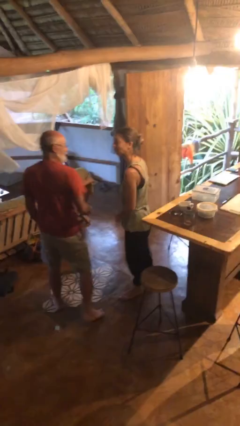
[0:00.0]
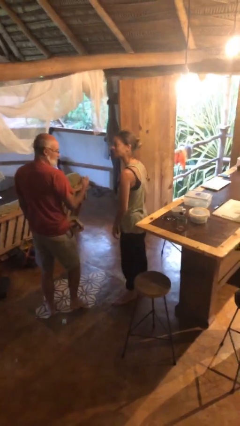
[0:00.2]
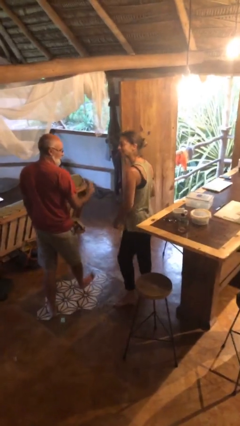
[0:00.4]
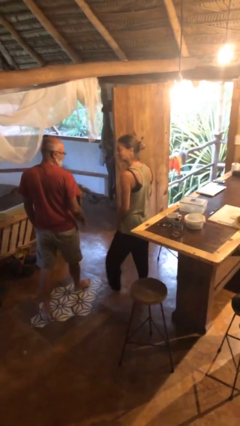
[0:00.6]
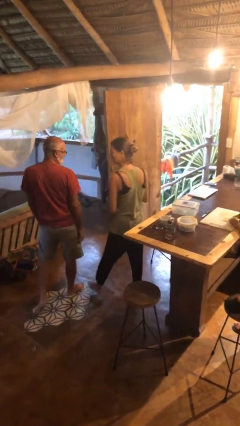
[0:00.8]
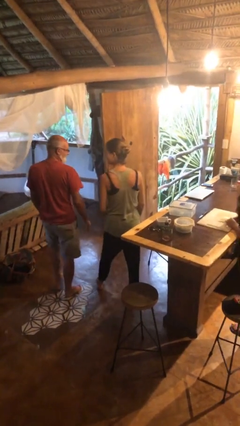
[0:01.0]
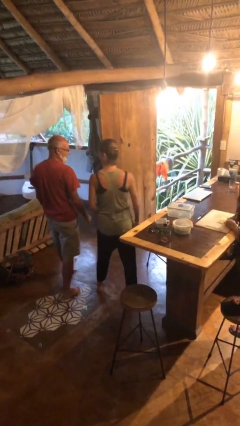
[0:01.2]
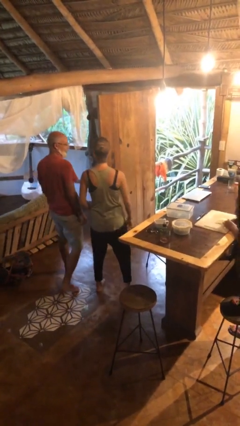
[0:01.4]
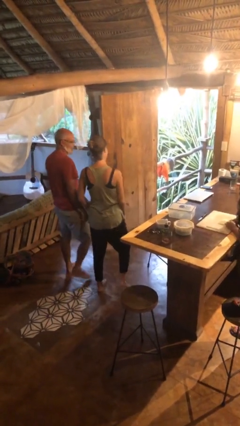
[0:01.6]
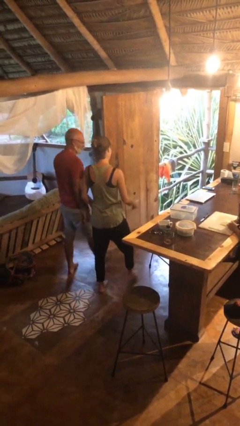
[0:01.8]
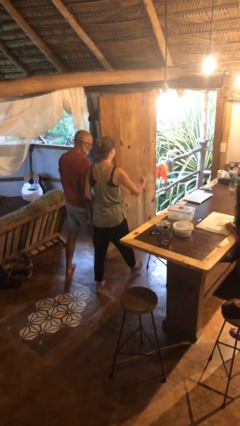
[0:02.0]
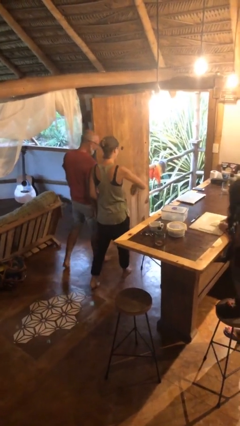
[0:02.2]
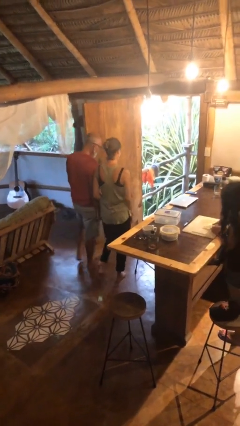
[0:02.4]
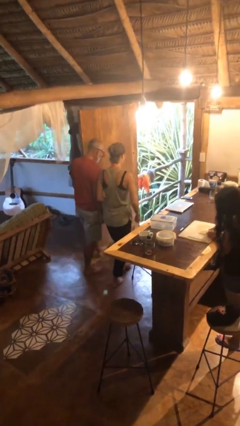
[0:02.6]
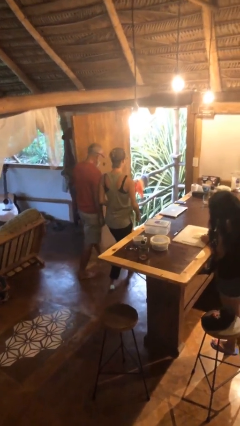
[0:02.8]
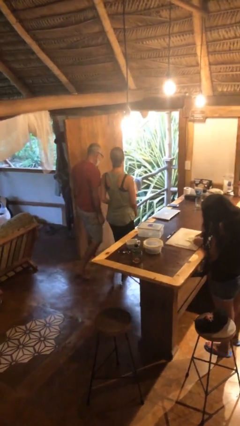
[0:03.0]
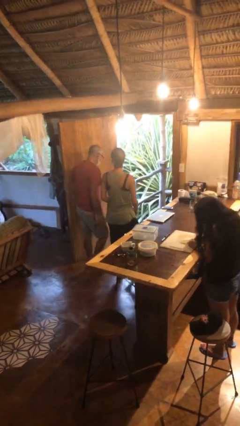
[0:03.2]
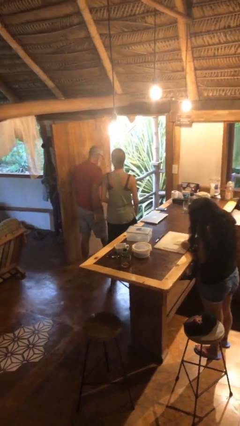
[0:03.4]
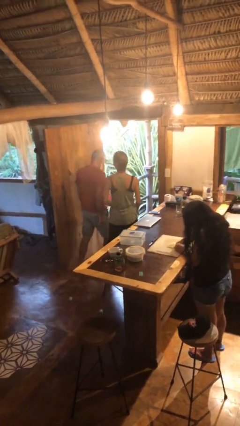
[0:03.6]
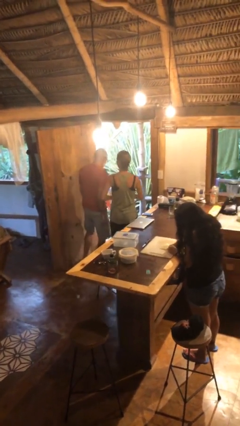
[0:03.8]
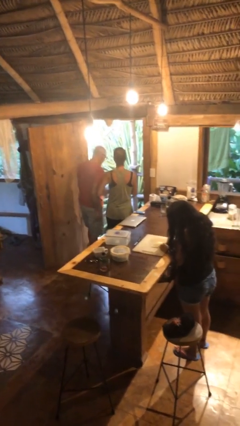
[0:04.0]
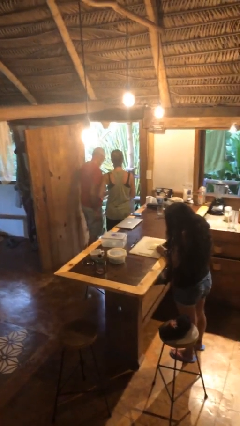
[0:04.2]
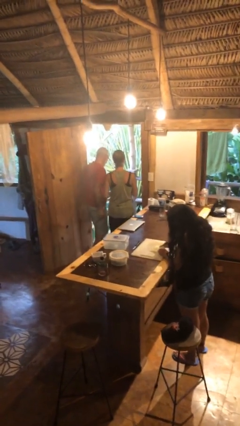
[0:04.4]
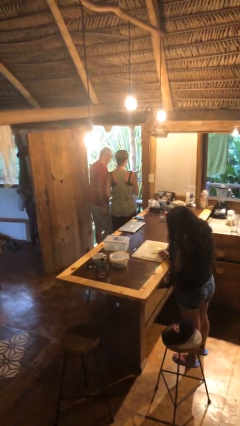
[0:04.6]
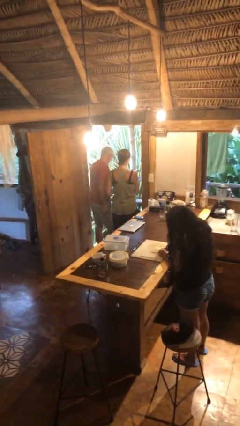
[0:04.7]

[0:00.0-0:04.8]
person talks to person

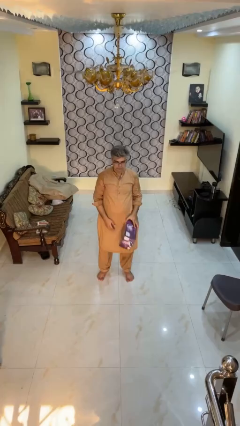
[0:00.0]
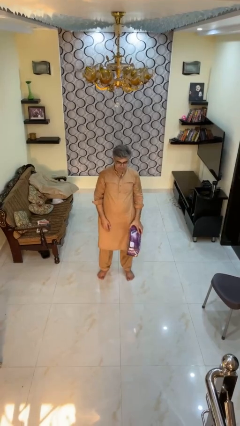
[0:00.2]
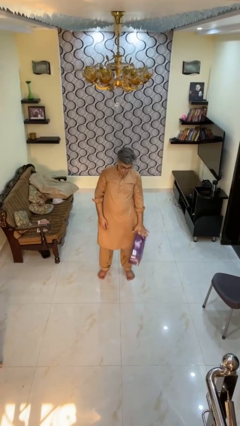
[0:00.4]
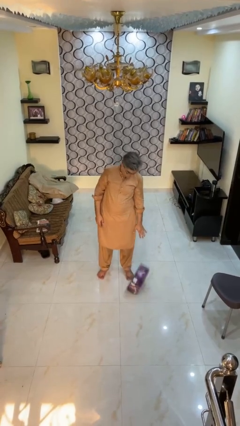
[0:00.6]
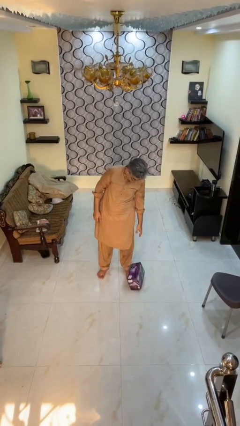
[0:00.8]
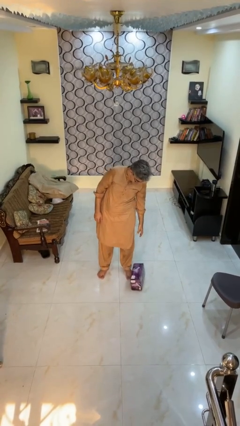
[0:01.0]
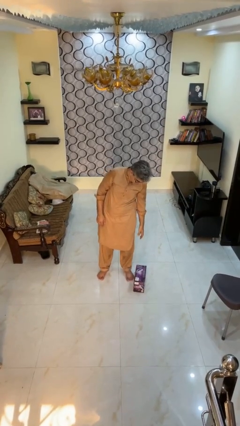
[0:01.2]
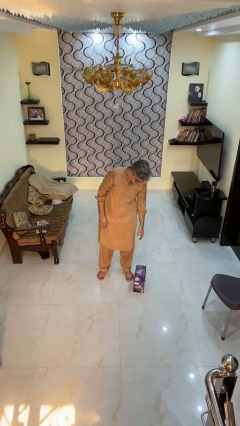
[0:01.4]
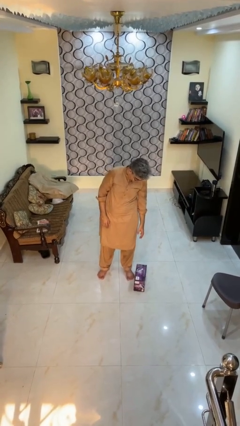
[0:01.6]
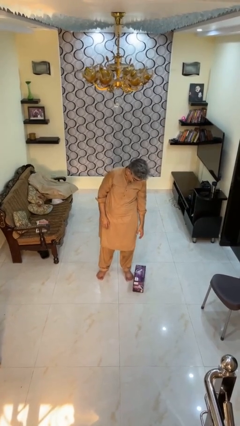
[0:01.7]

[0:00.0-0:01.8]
person drops object

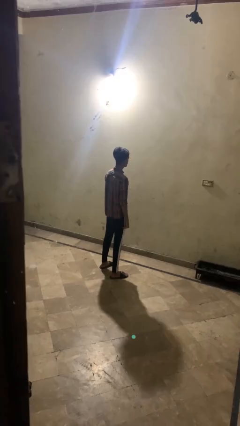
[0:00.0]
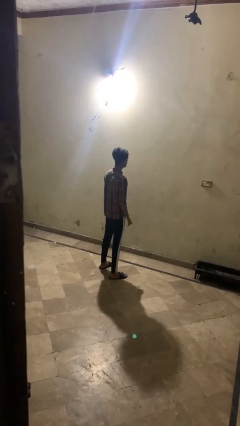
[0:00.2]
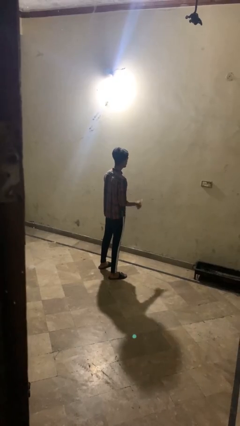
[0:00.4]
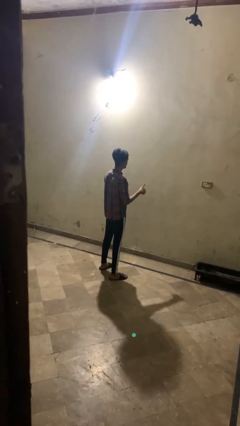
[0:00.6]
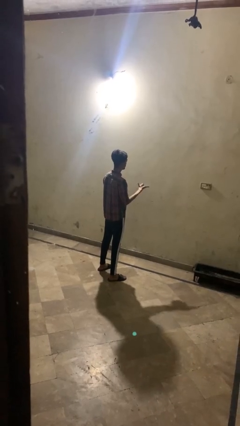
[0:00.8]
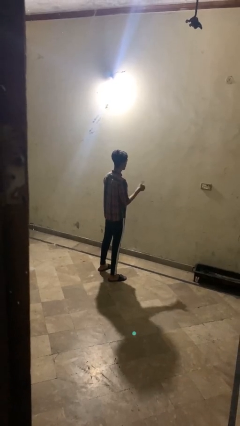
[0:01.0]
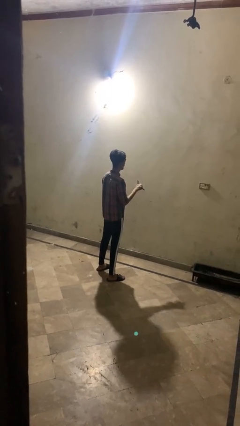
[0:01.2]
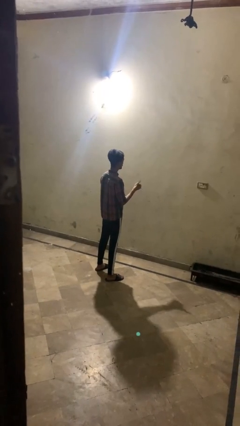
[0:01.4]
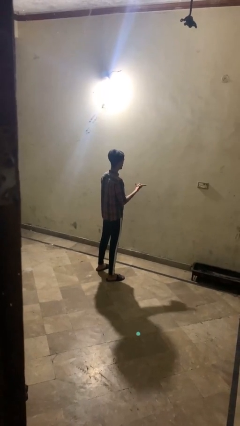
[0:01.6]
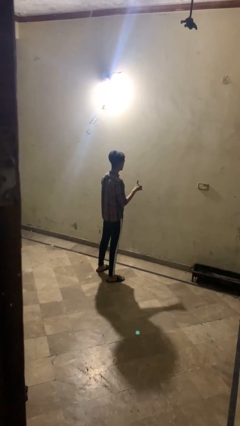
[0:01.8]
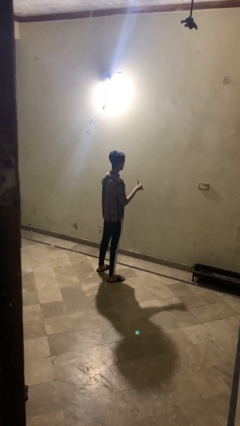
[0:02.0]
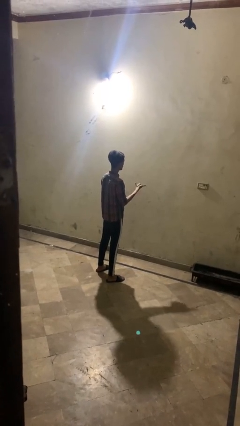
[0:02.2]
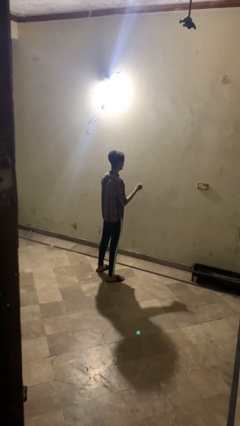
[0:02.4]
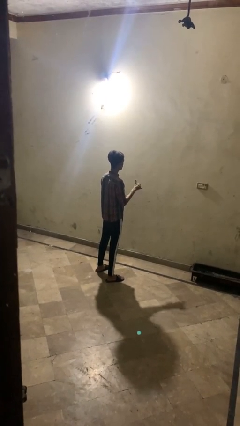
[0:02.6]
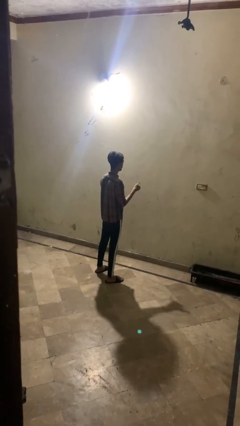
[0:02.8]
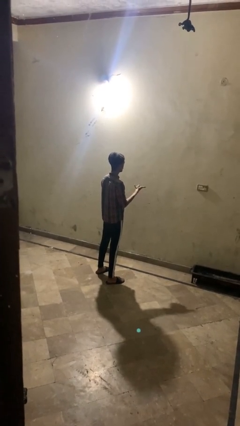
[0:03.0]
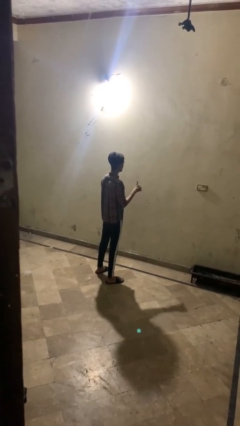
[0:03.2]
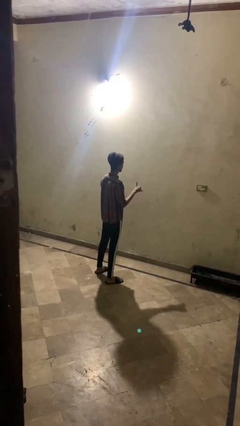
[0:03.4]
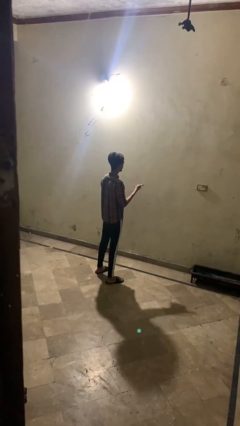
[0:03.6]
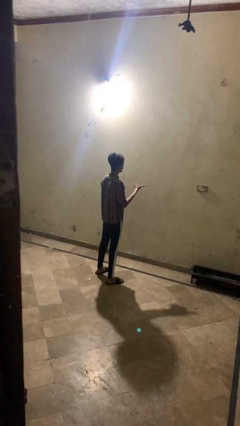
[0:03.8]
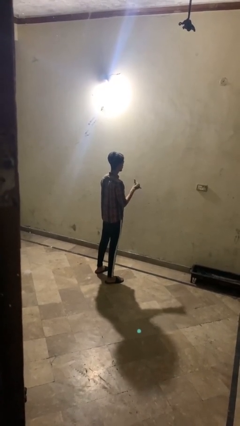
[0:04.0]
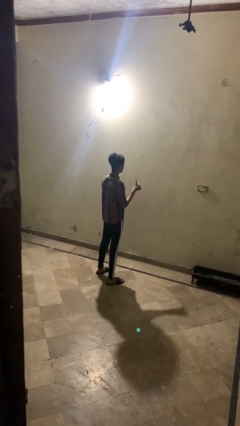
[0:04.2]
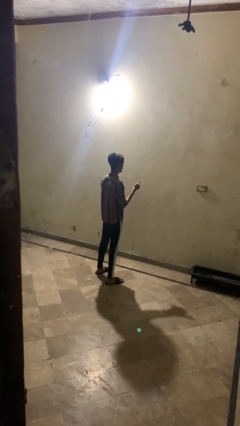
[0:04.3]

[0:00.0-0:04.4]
person gestures hang loose

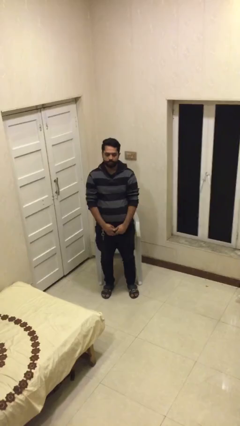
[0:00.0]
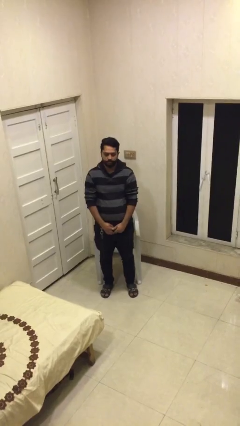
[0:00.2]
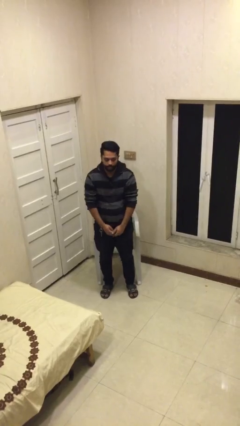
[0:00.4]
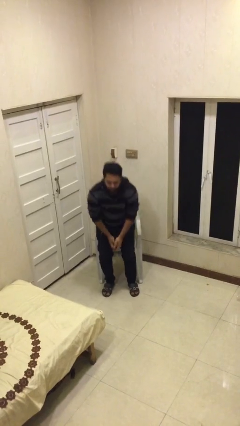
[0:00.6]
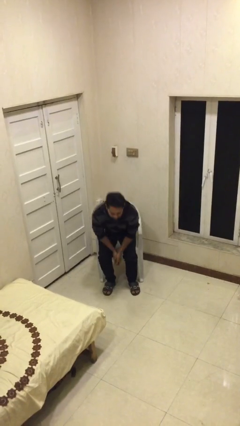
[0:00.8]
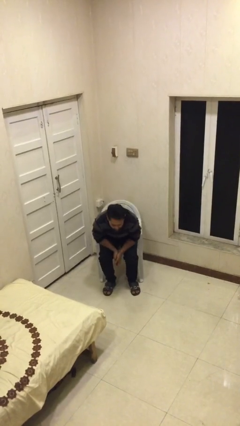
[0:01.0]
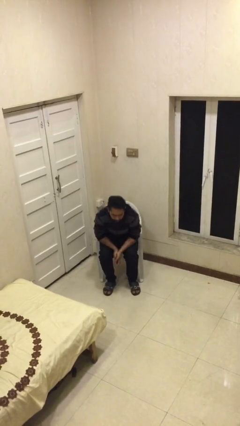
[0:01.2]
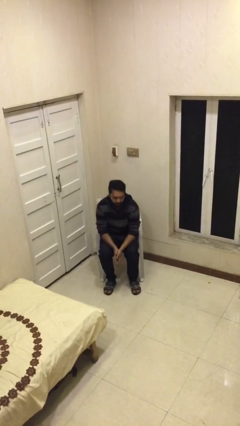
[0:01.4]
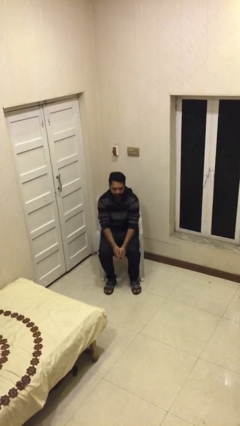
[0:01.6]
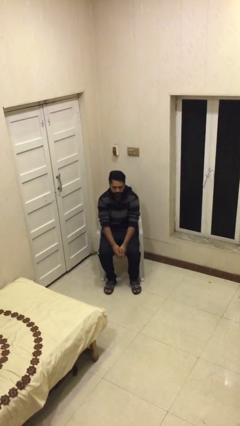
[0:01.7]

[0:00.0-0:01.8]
person sits down

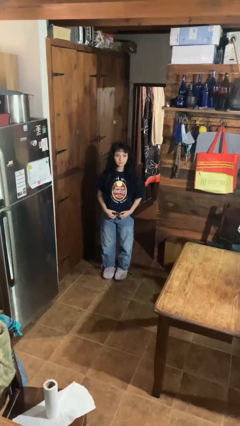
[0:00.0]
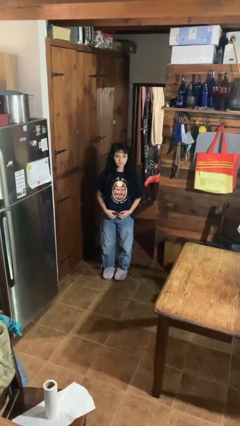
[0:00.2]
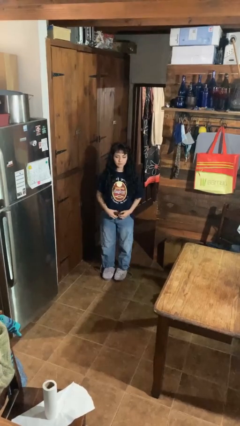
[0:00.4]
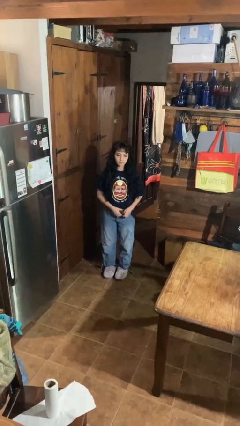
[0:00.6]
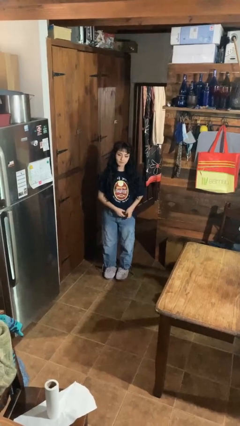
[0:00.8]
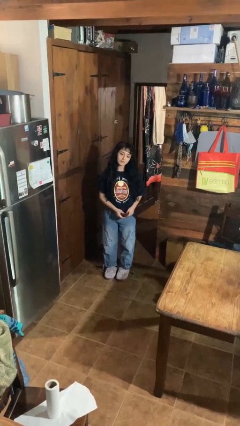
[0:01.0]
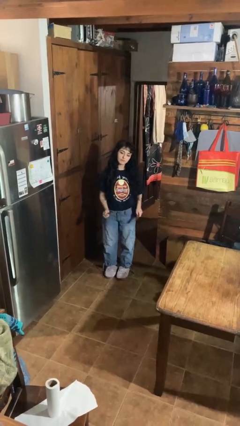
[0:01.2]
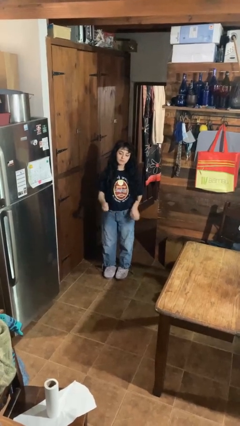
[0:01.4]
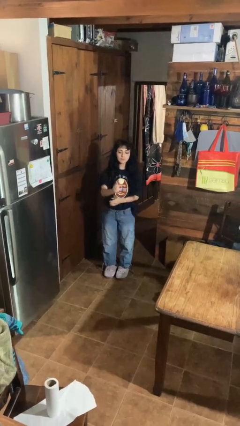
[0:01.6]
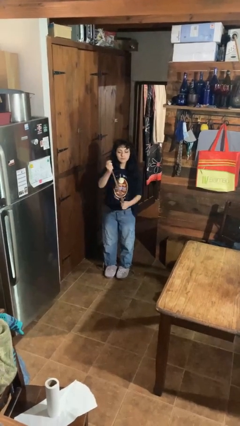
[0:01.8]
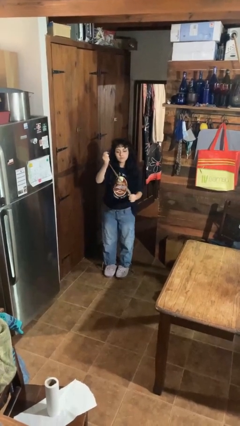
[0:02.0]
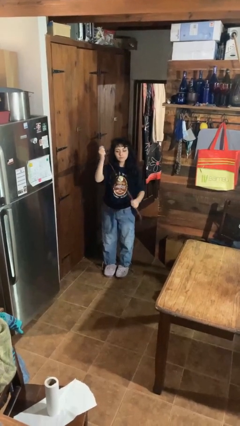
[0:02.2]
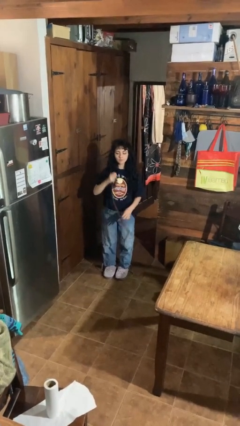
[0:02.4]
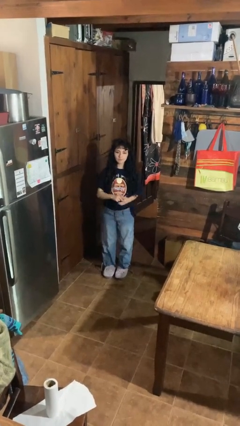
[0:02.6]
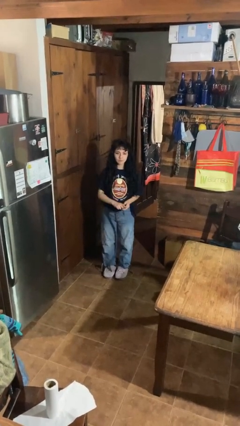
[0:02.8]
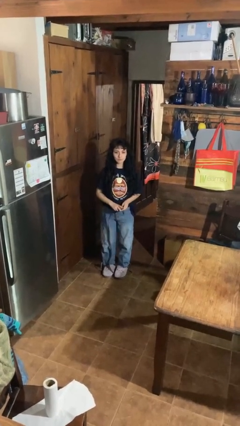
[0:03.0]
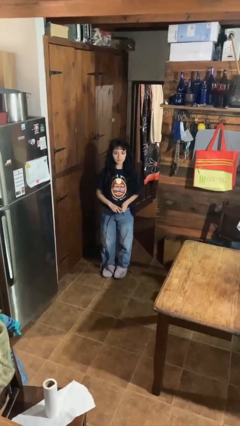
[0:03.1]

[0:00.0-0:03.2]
person takes off belt

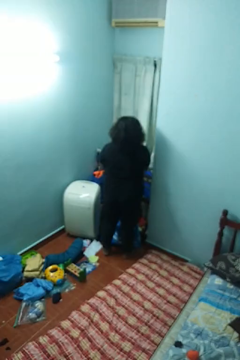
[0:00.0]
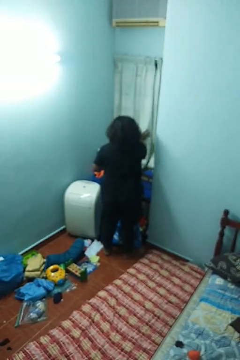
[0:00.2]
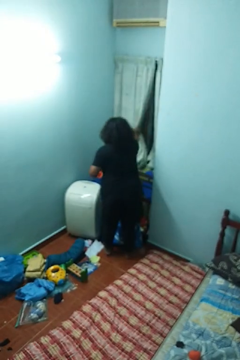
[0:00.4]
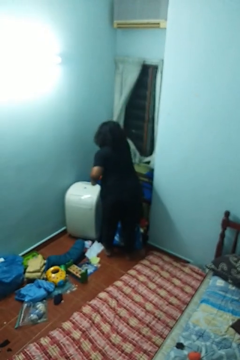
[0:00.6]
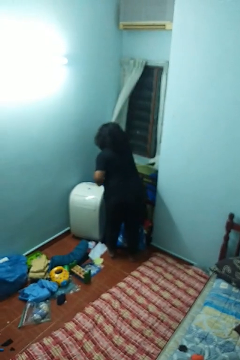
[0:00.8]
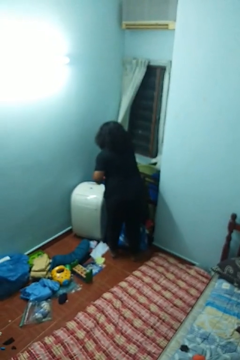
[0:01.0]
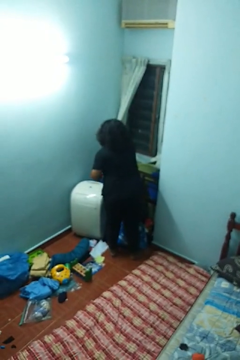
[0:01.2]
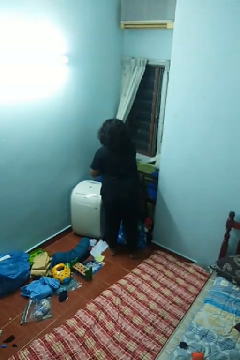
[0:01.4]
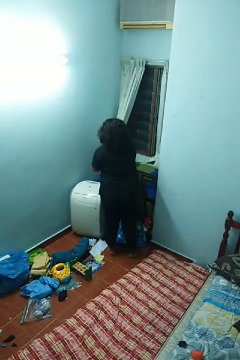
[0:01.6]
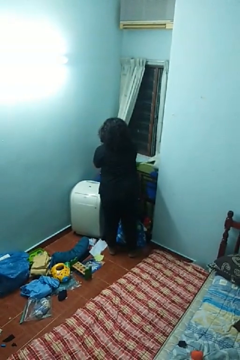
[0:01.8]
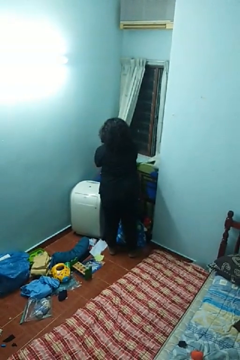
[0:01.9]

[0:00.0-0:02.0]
person opens curtains
